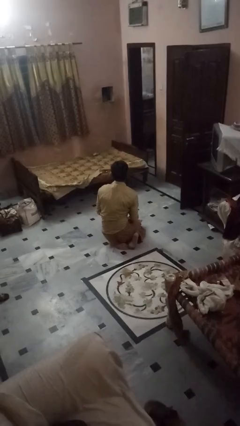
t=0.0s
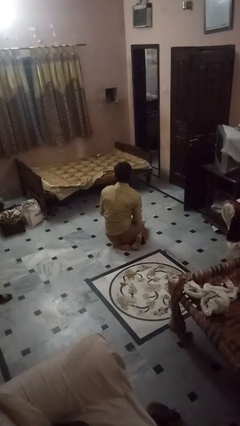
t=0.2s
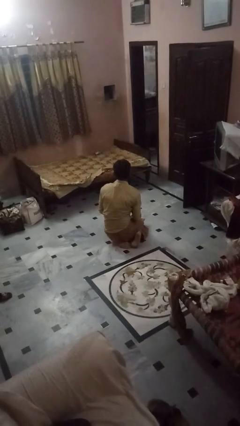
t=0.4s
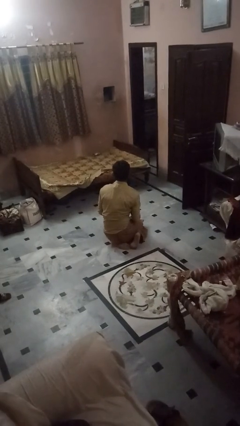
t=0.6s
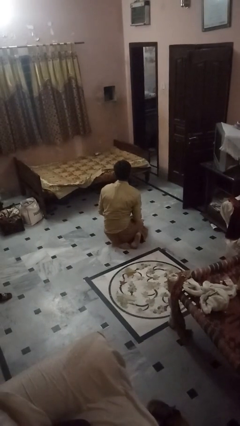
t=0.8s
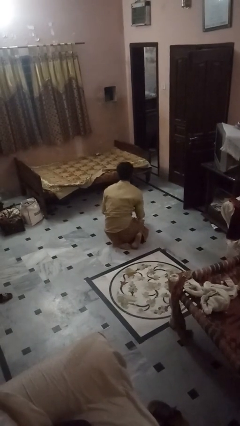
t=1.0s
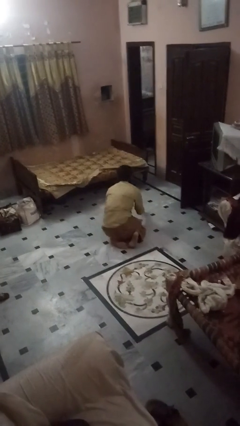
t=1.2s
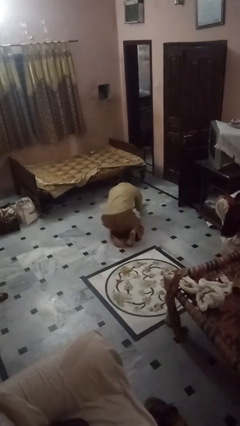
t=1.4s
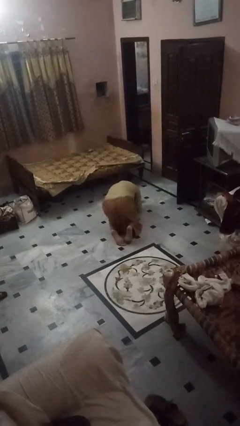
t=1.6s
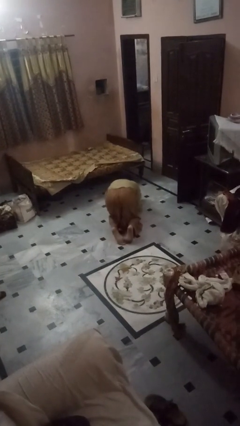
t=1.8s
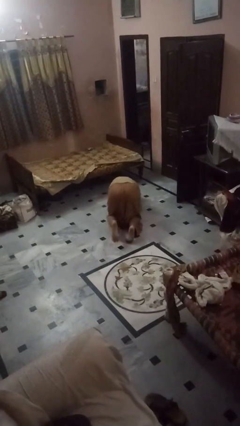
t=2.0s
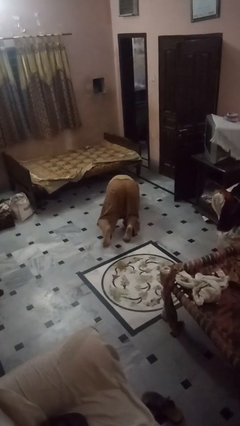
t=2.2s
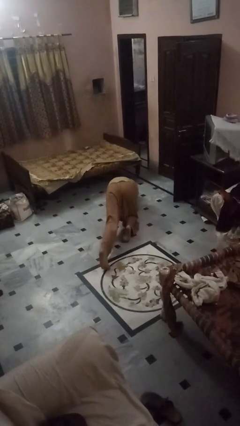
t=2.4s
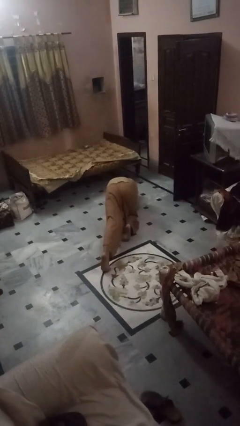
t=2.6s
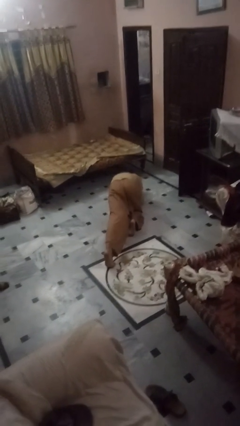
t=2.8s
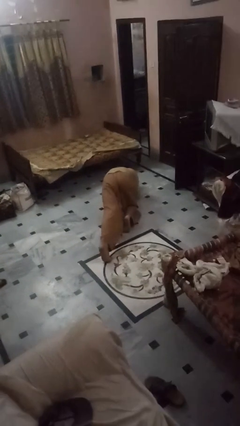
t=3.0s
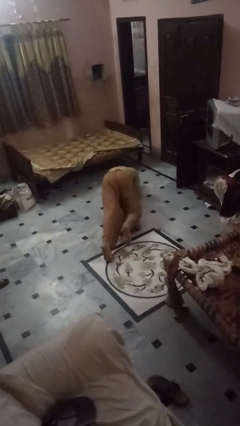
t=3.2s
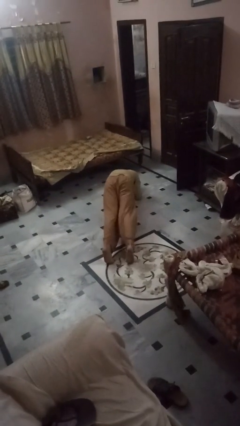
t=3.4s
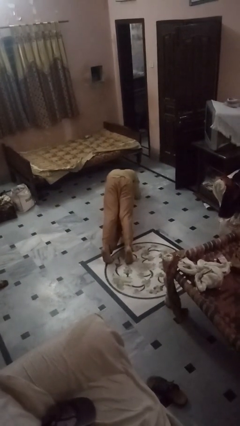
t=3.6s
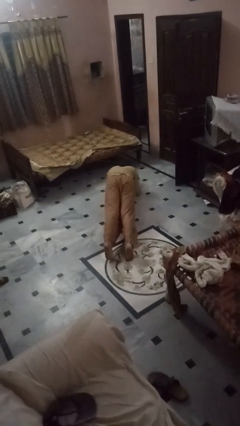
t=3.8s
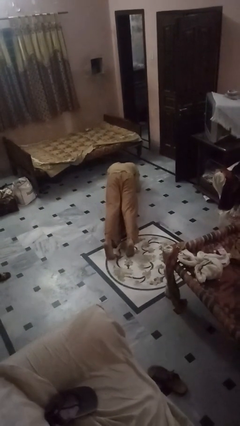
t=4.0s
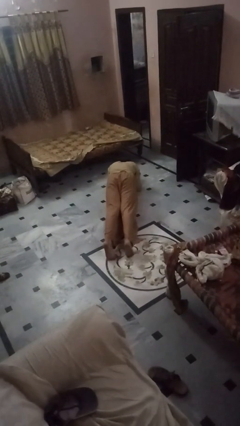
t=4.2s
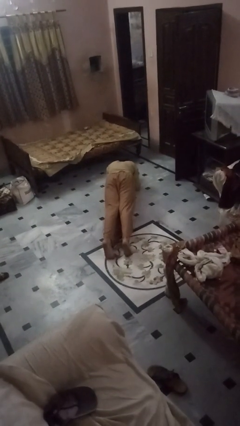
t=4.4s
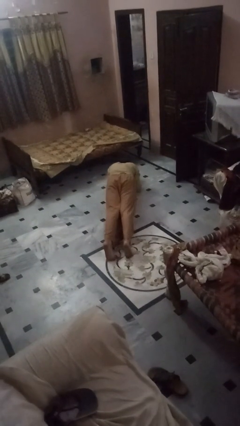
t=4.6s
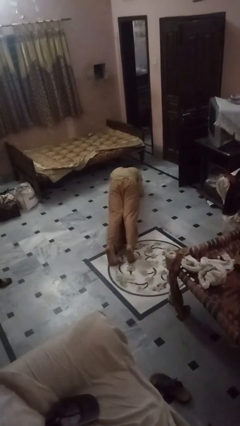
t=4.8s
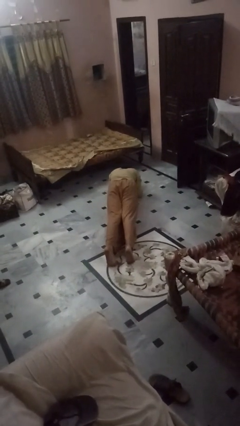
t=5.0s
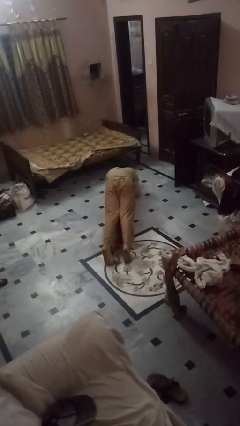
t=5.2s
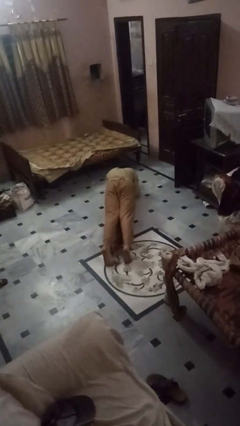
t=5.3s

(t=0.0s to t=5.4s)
person exercises with plank

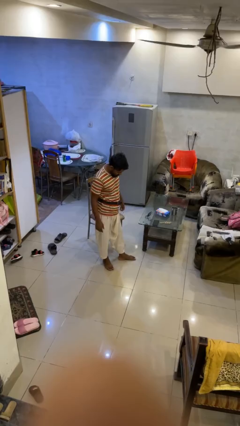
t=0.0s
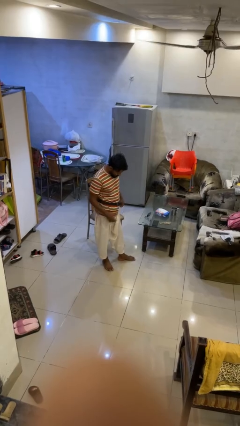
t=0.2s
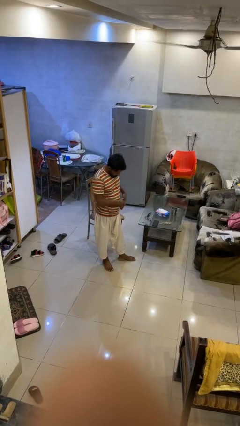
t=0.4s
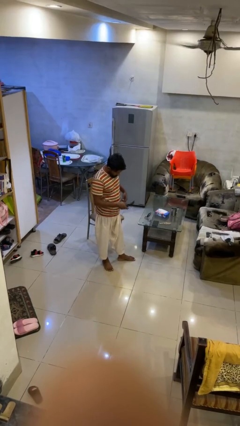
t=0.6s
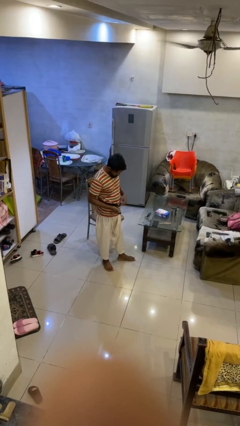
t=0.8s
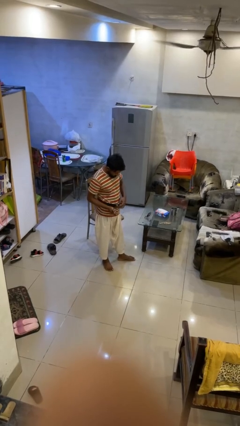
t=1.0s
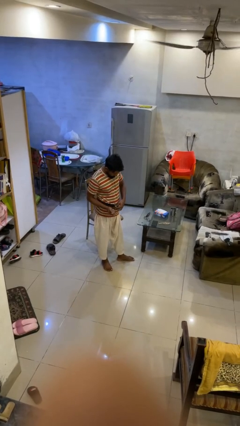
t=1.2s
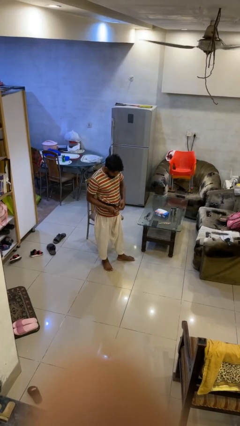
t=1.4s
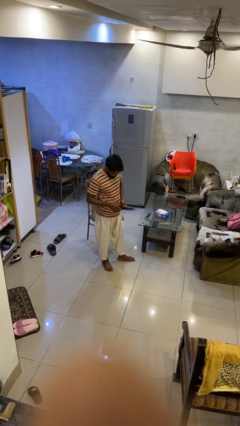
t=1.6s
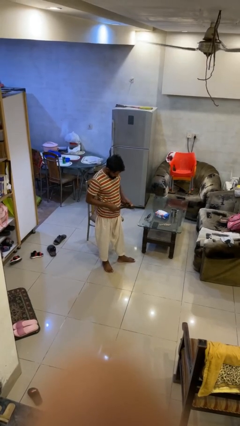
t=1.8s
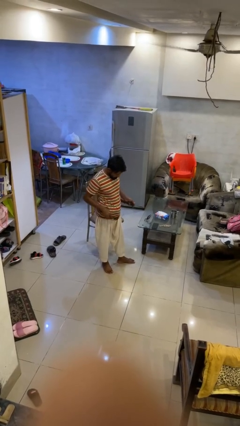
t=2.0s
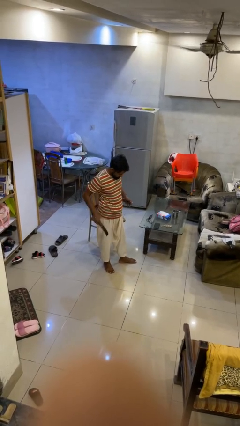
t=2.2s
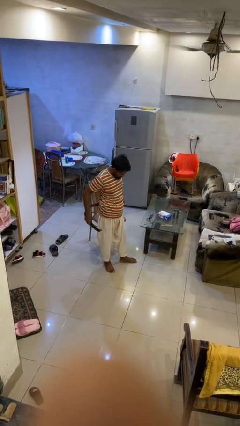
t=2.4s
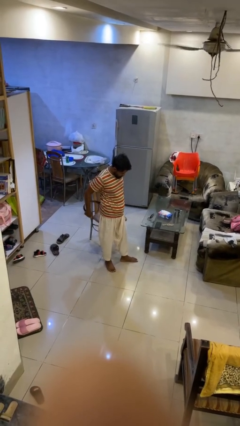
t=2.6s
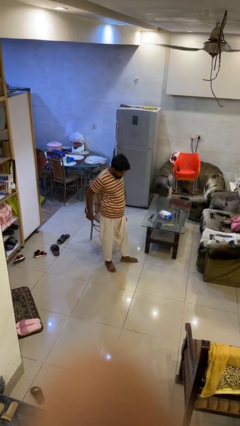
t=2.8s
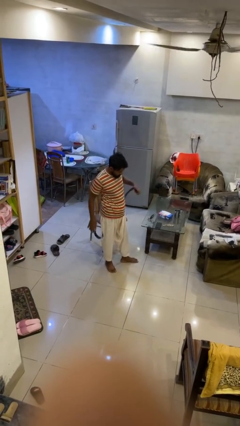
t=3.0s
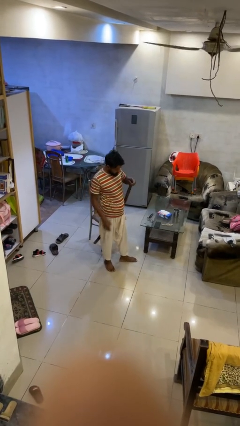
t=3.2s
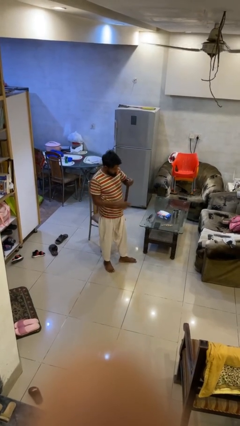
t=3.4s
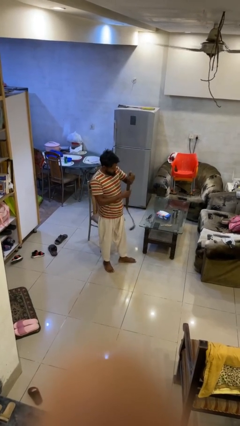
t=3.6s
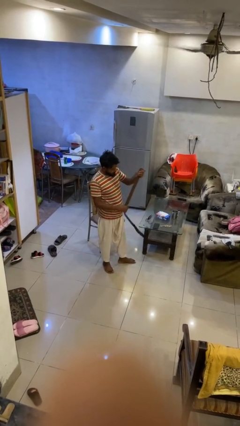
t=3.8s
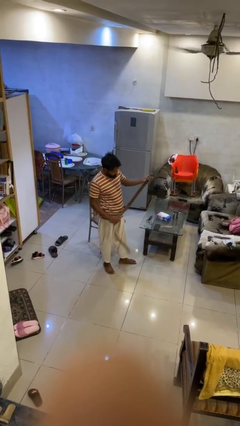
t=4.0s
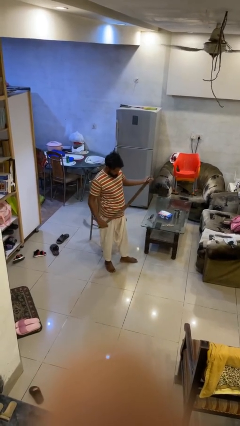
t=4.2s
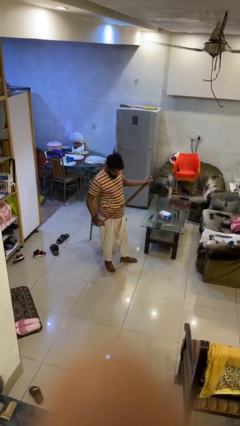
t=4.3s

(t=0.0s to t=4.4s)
person takes off belt

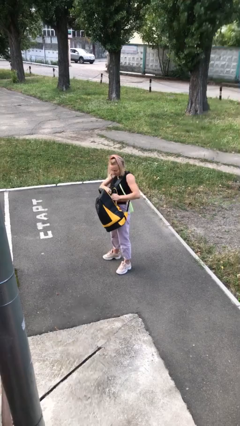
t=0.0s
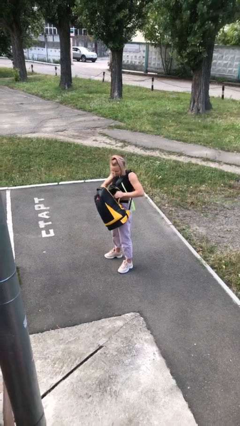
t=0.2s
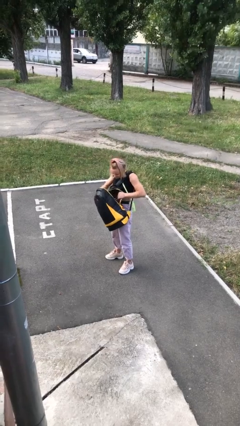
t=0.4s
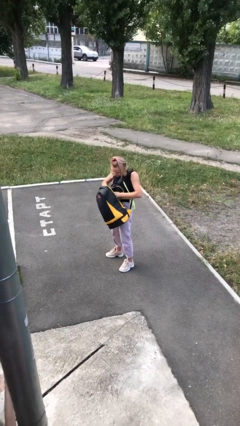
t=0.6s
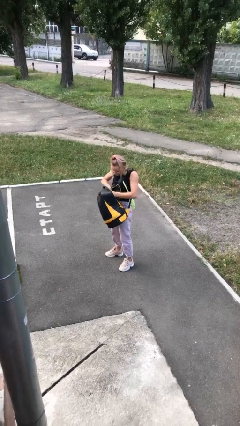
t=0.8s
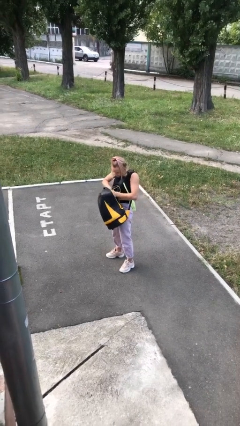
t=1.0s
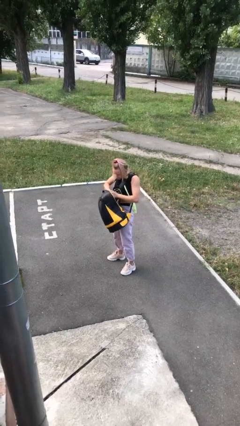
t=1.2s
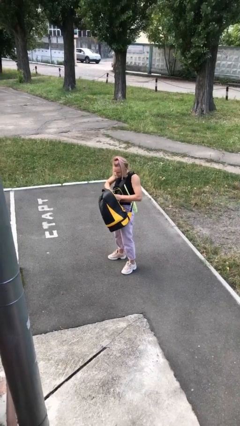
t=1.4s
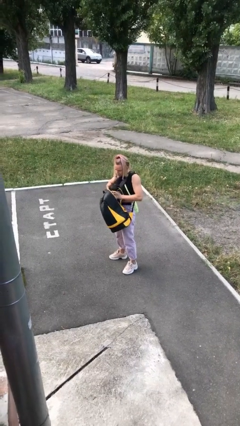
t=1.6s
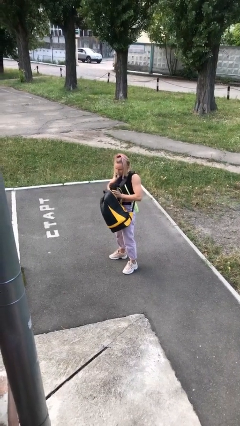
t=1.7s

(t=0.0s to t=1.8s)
person searches in backpack

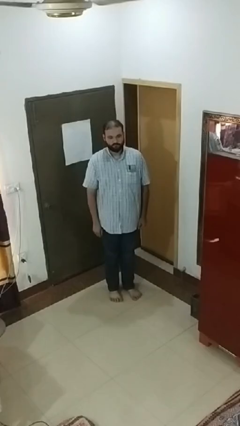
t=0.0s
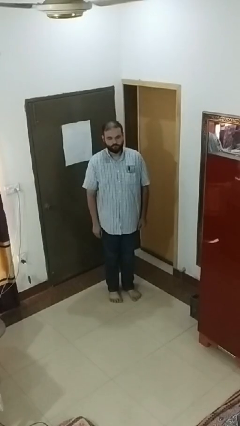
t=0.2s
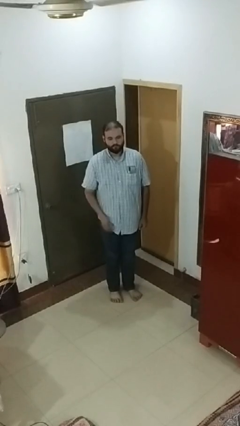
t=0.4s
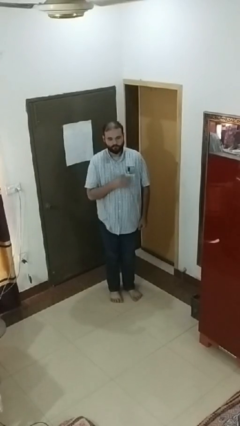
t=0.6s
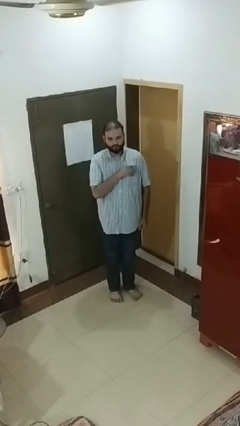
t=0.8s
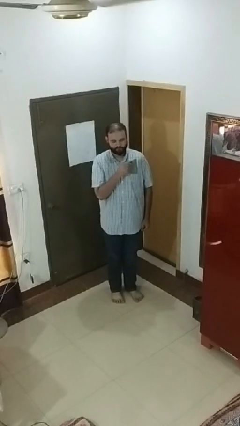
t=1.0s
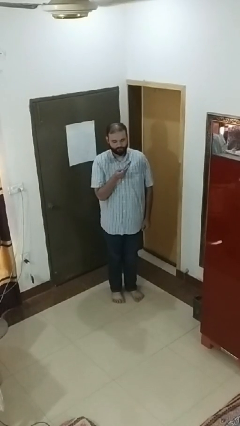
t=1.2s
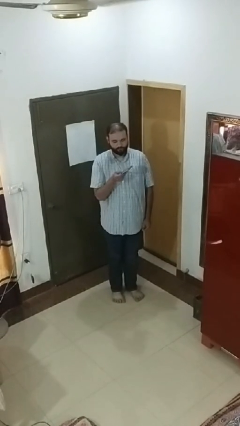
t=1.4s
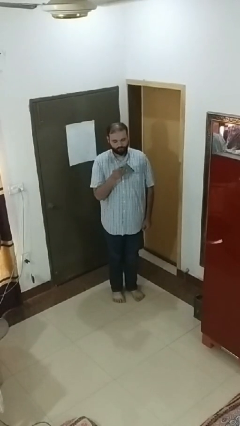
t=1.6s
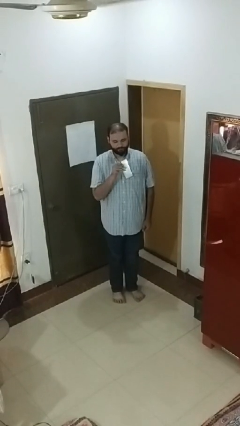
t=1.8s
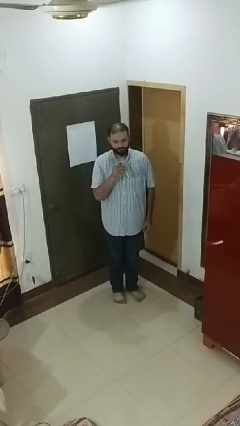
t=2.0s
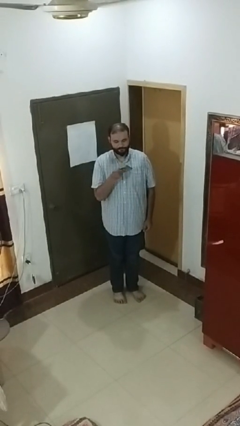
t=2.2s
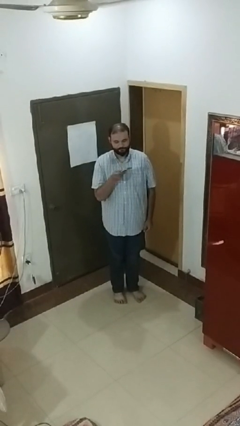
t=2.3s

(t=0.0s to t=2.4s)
person takes phone from pocket

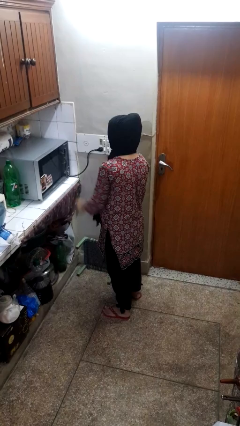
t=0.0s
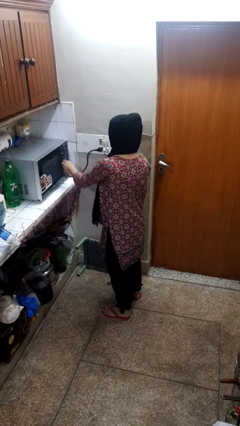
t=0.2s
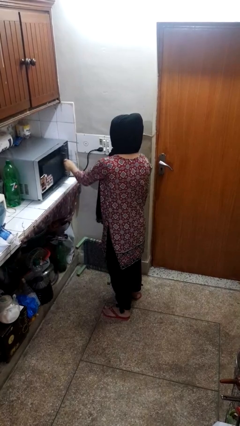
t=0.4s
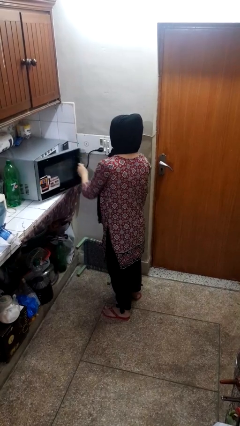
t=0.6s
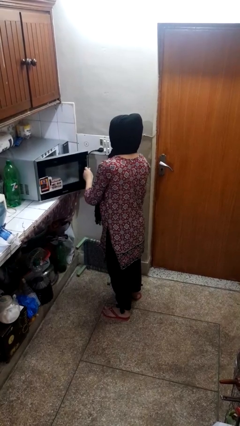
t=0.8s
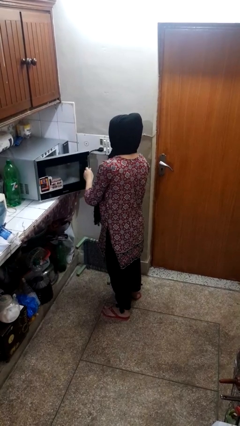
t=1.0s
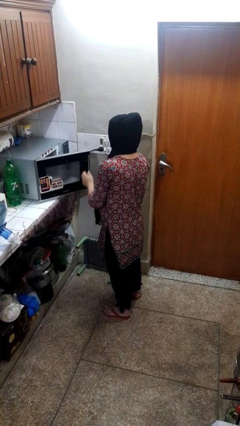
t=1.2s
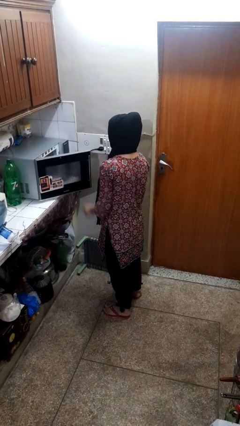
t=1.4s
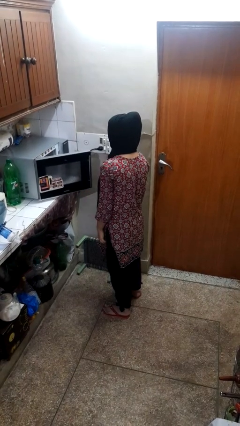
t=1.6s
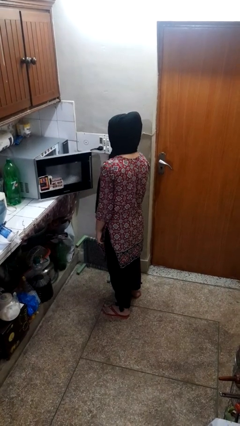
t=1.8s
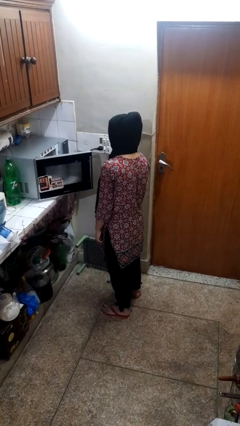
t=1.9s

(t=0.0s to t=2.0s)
person opens oven door

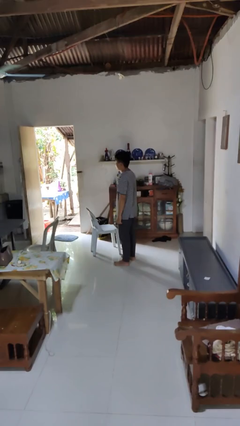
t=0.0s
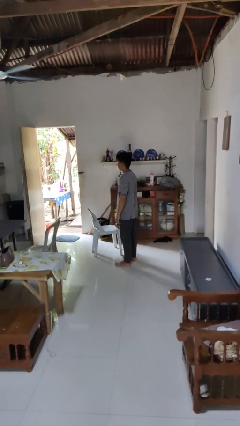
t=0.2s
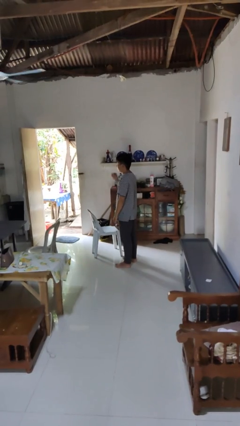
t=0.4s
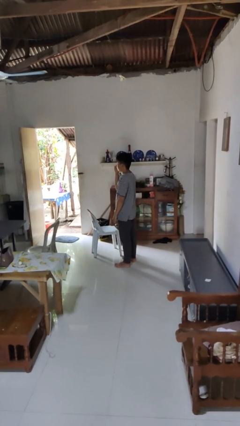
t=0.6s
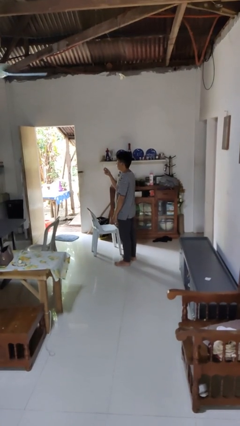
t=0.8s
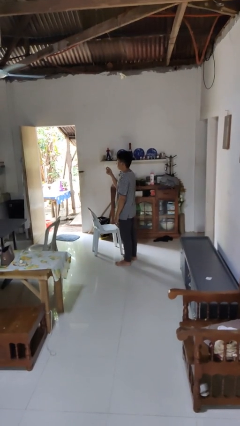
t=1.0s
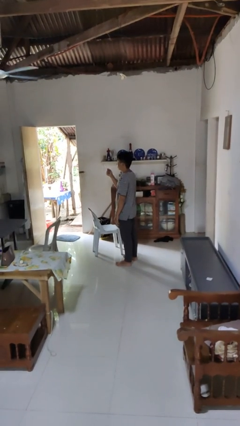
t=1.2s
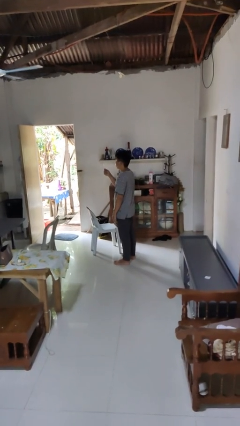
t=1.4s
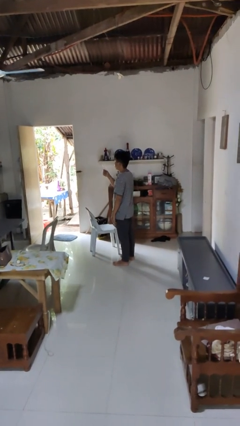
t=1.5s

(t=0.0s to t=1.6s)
person snaps fingers

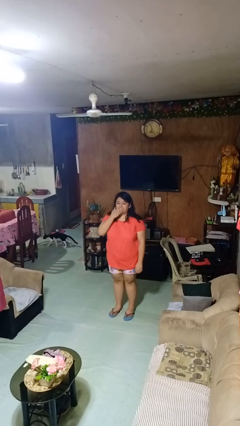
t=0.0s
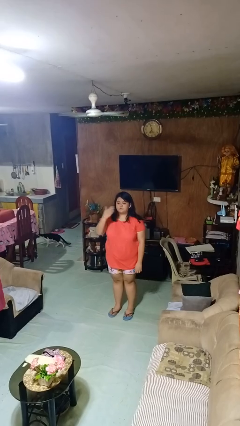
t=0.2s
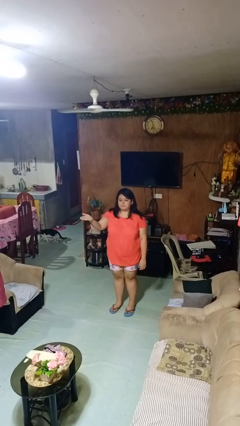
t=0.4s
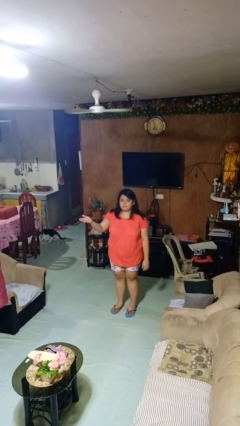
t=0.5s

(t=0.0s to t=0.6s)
person gestures blow kiss
